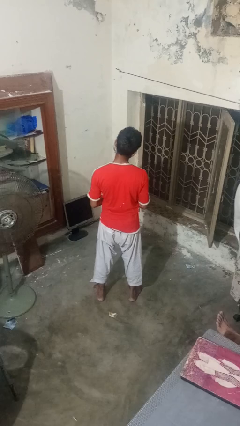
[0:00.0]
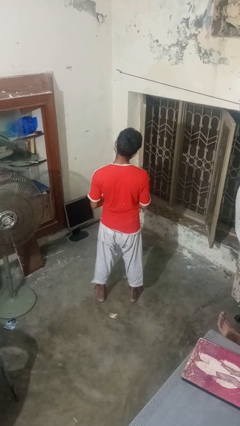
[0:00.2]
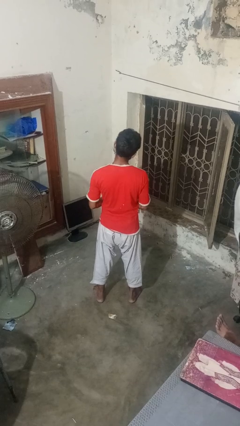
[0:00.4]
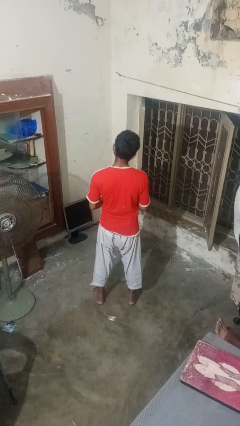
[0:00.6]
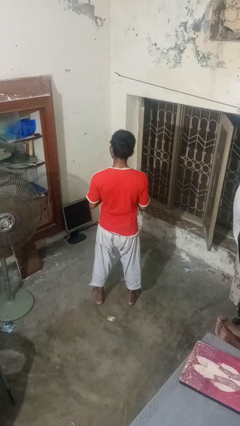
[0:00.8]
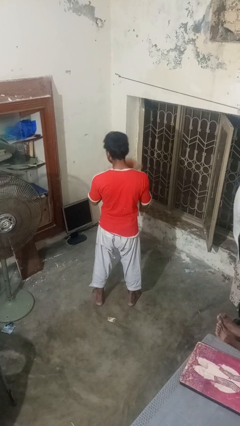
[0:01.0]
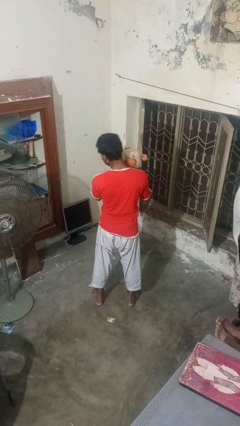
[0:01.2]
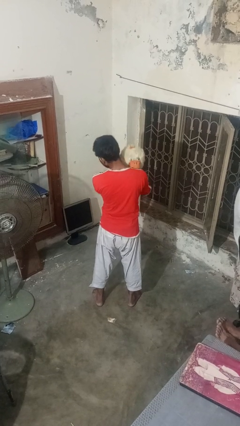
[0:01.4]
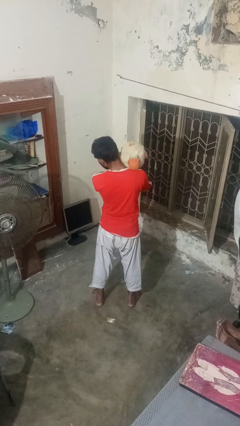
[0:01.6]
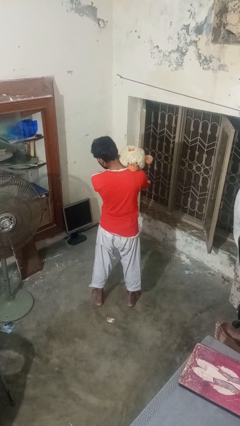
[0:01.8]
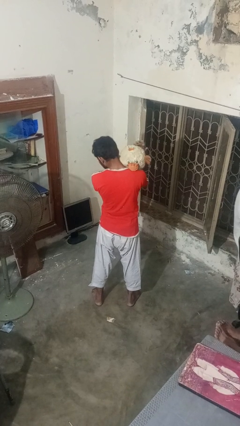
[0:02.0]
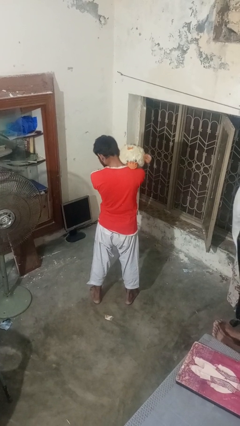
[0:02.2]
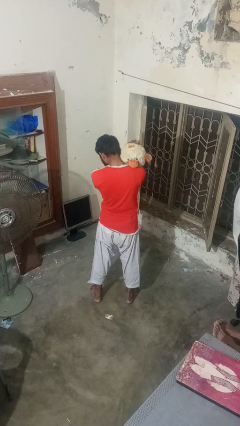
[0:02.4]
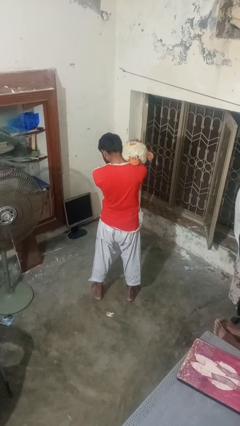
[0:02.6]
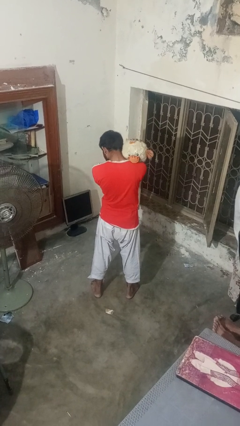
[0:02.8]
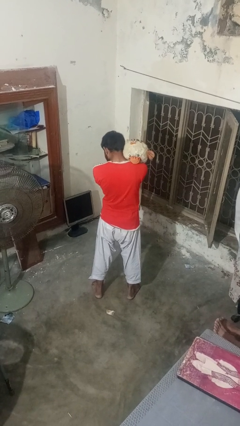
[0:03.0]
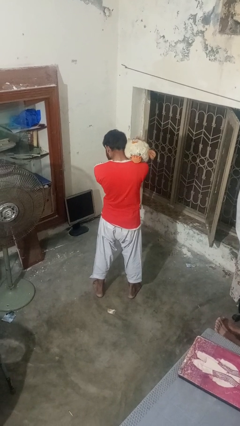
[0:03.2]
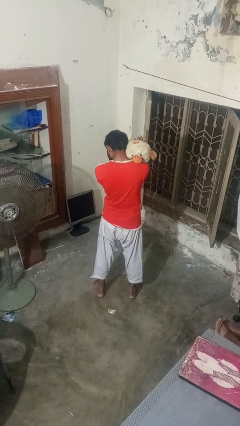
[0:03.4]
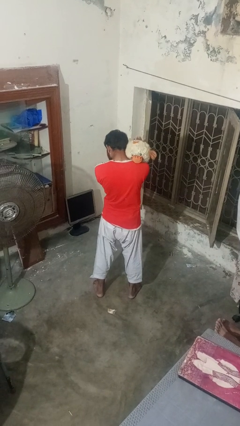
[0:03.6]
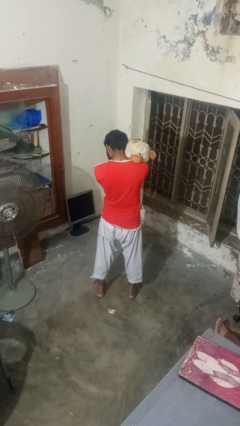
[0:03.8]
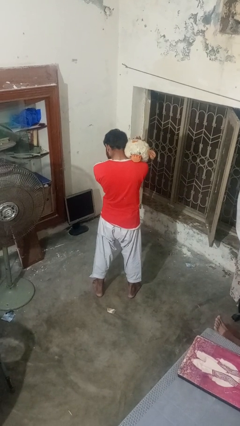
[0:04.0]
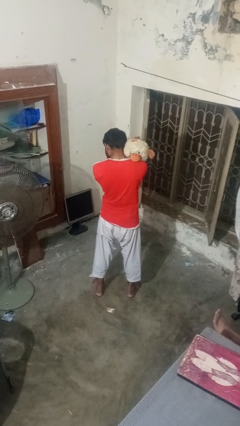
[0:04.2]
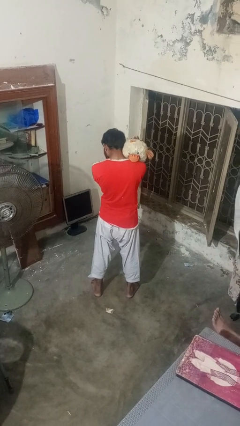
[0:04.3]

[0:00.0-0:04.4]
person hugs stuffed animal

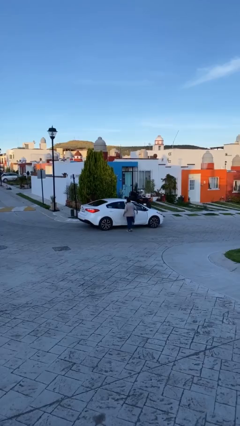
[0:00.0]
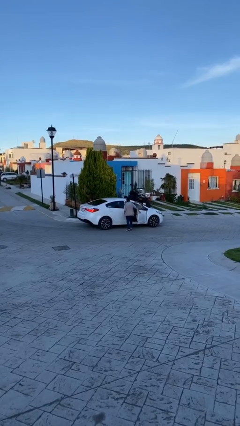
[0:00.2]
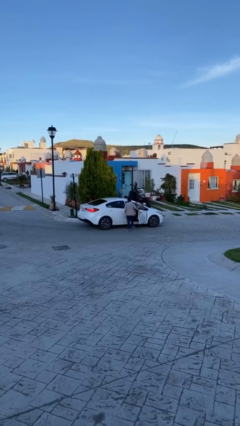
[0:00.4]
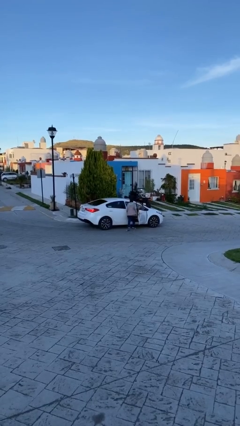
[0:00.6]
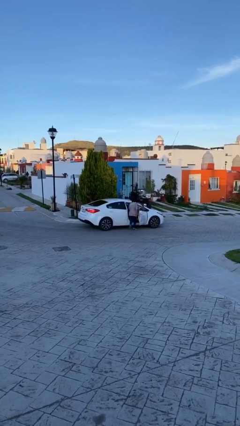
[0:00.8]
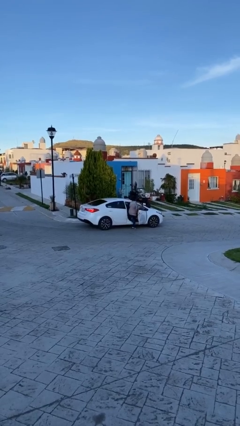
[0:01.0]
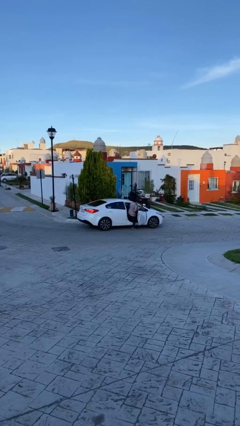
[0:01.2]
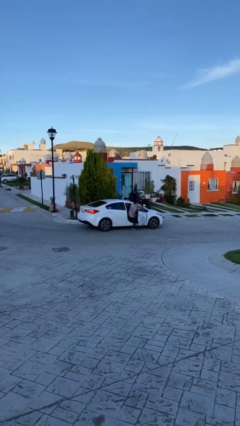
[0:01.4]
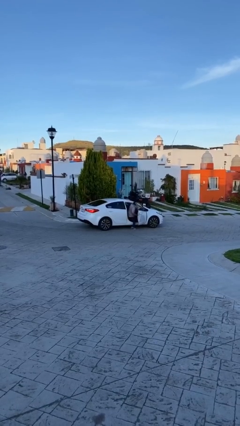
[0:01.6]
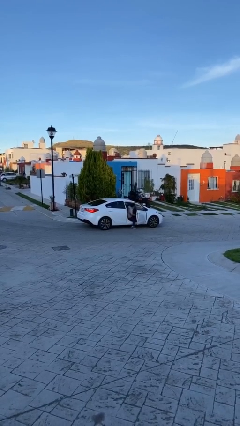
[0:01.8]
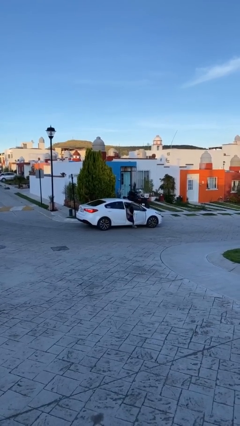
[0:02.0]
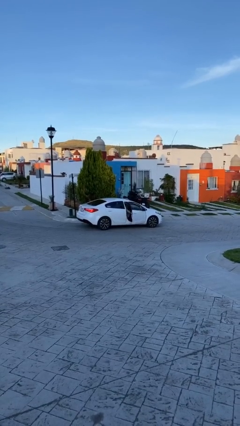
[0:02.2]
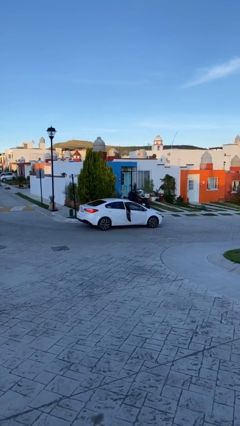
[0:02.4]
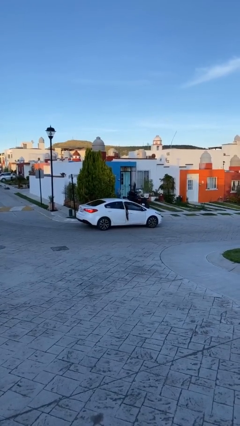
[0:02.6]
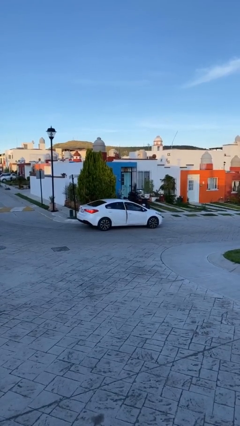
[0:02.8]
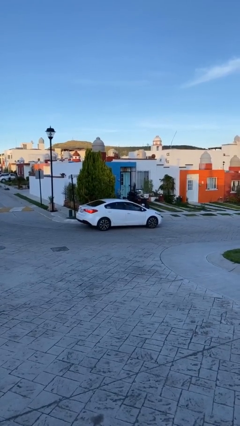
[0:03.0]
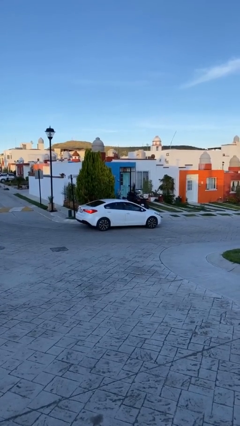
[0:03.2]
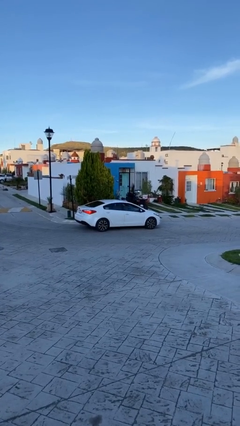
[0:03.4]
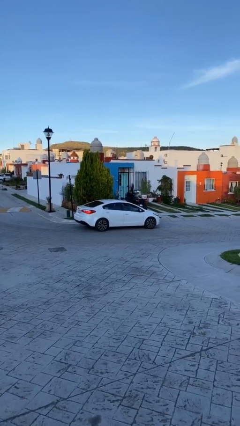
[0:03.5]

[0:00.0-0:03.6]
car picks up person

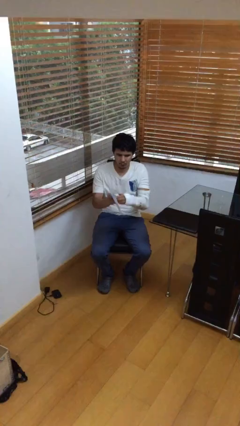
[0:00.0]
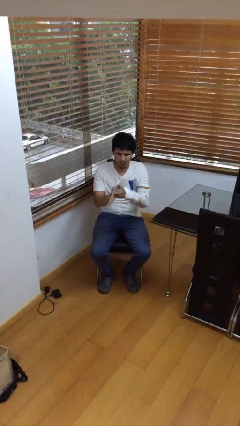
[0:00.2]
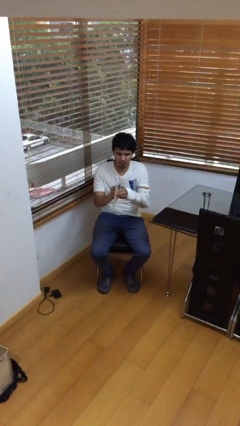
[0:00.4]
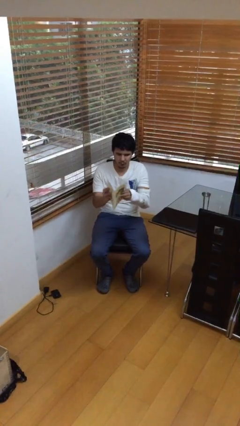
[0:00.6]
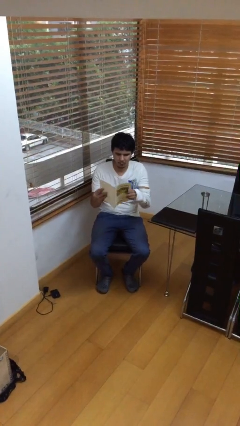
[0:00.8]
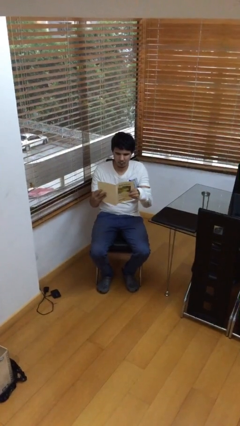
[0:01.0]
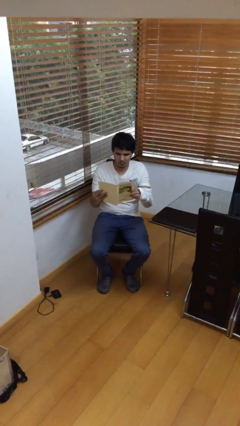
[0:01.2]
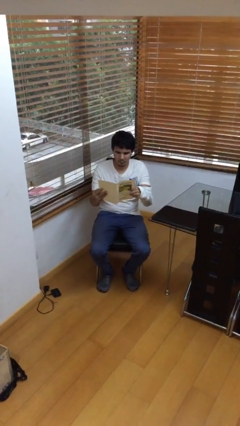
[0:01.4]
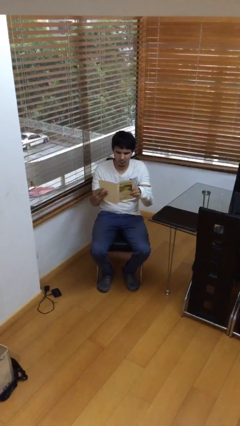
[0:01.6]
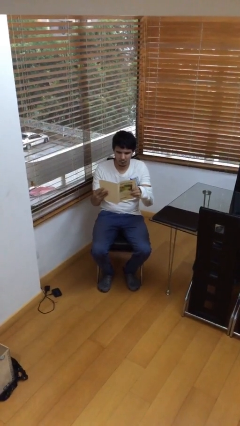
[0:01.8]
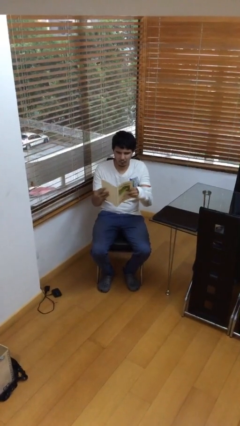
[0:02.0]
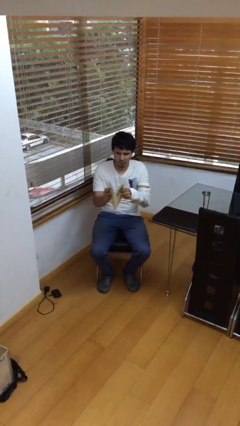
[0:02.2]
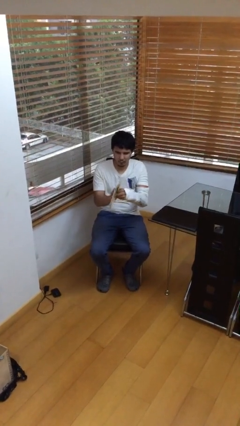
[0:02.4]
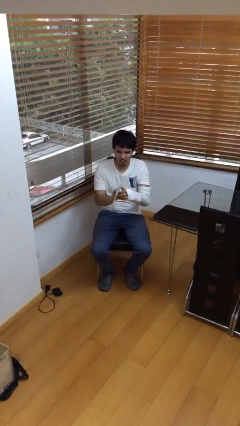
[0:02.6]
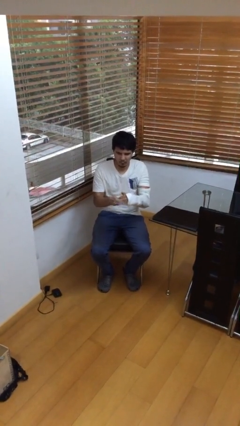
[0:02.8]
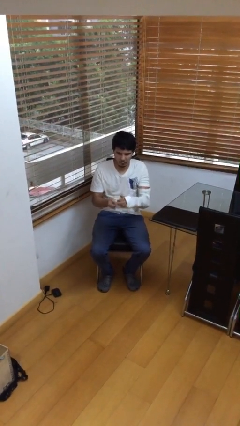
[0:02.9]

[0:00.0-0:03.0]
person reads document

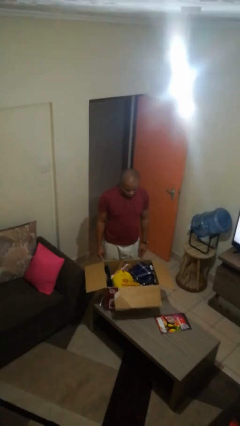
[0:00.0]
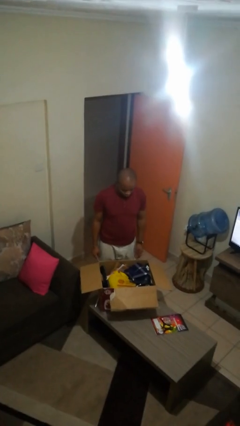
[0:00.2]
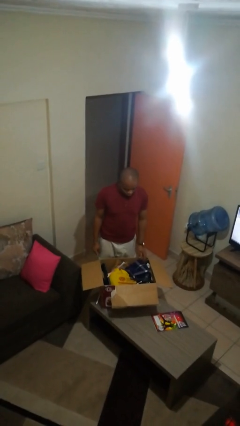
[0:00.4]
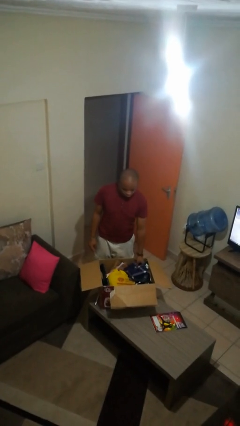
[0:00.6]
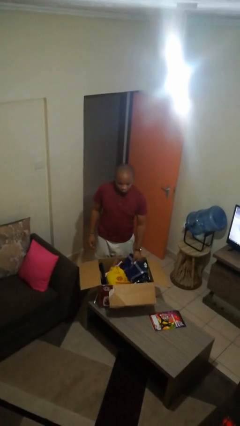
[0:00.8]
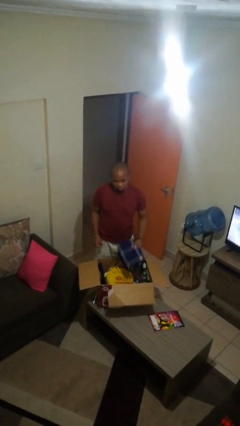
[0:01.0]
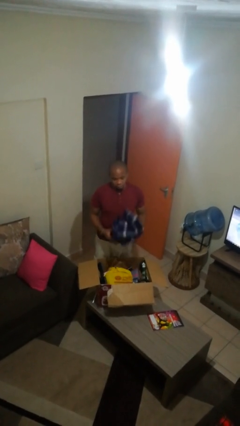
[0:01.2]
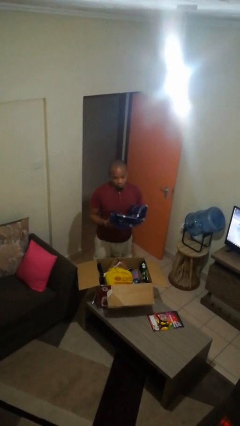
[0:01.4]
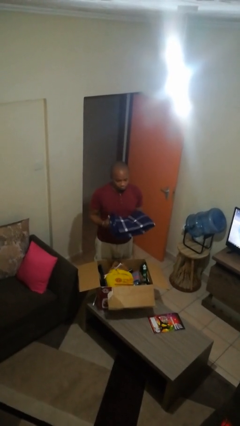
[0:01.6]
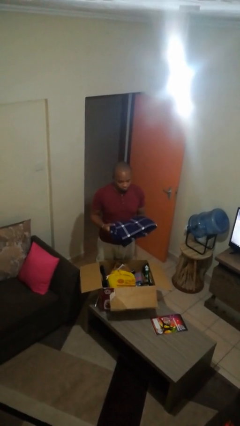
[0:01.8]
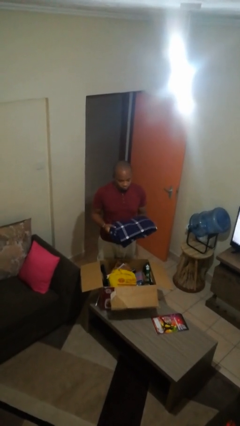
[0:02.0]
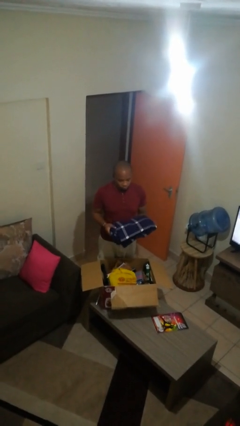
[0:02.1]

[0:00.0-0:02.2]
person takes object from box

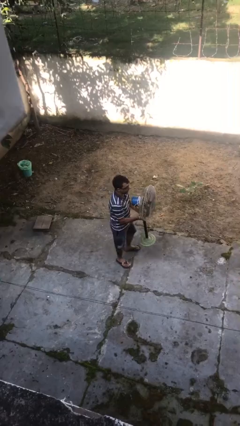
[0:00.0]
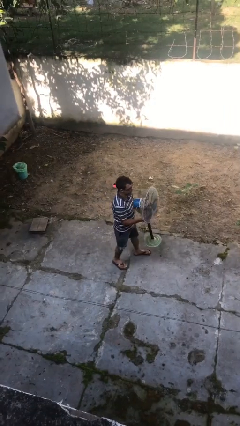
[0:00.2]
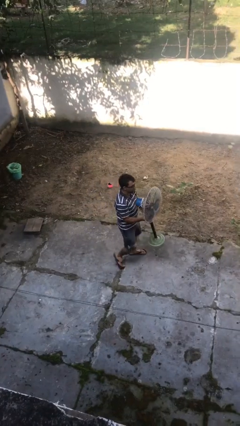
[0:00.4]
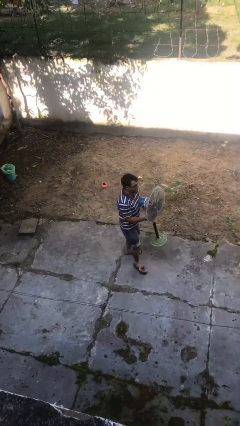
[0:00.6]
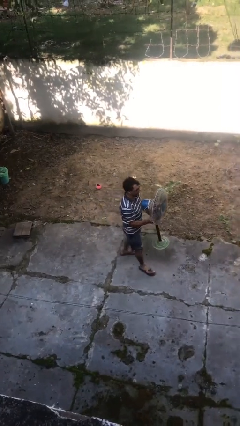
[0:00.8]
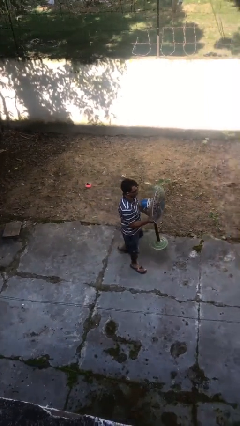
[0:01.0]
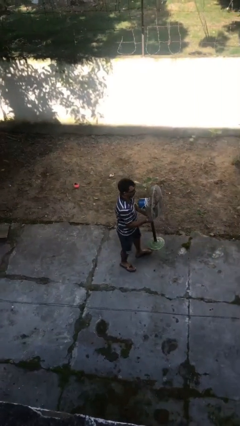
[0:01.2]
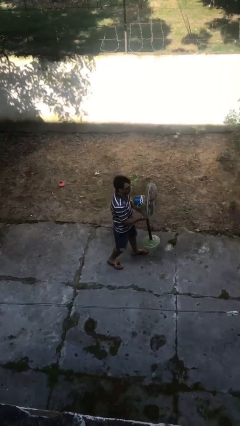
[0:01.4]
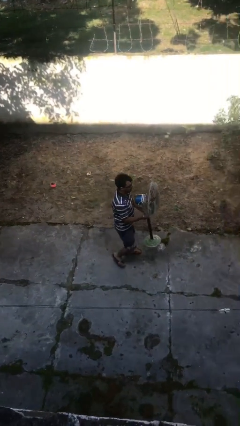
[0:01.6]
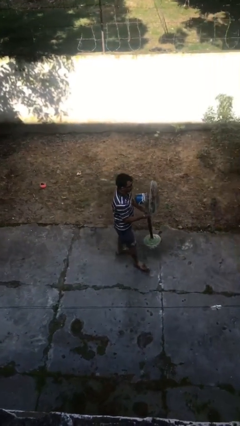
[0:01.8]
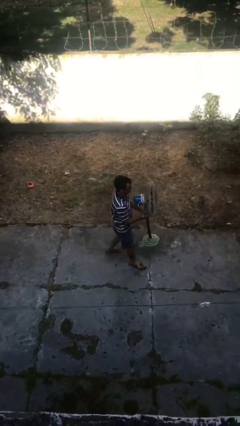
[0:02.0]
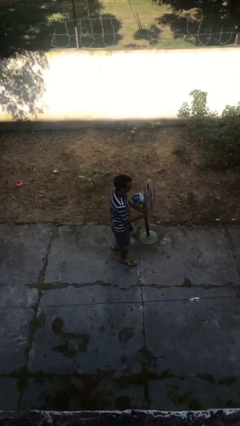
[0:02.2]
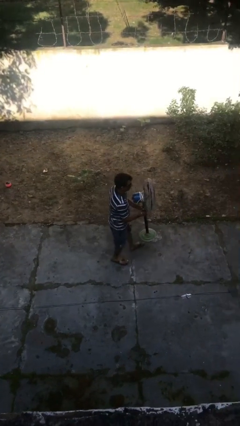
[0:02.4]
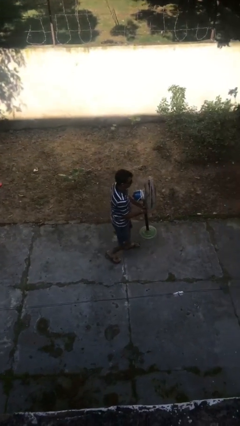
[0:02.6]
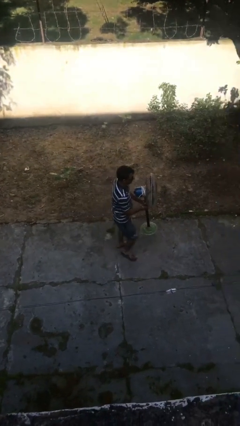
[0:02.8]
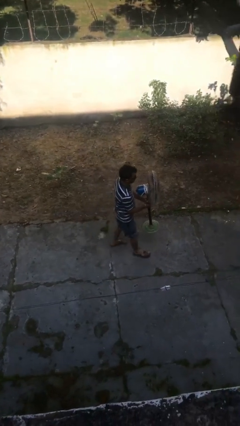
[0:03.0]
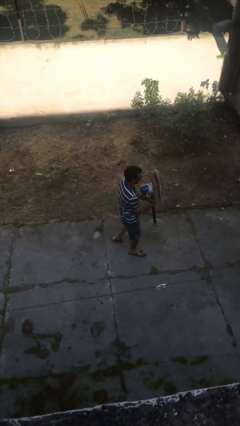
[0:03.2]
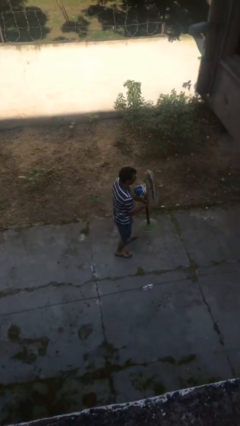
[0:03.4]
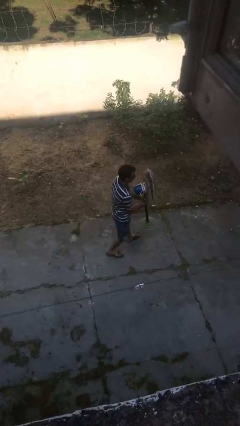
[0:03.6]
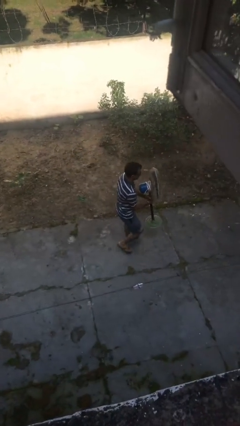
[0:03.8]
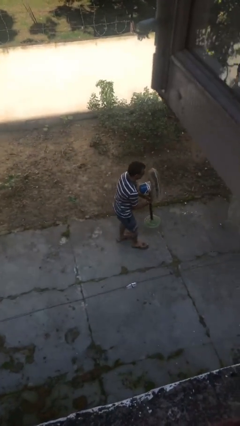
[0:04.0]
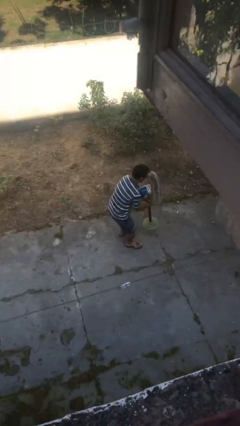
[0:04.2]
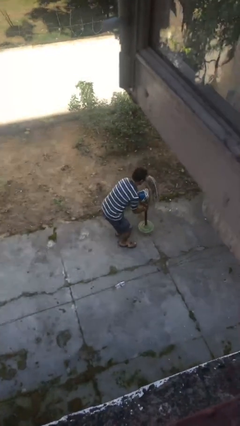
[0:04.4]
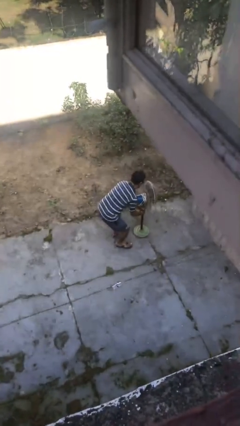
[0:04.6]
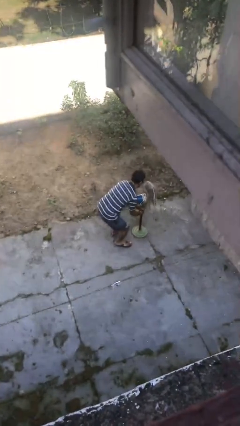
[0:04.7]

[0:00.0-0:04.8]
person carries heavy object
